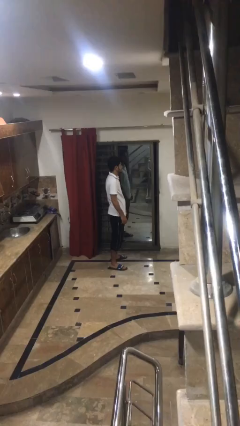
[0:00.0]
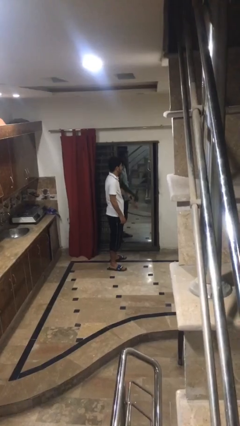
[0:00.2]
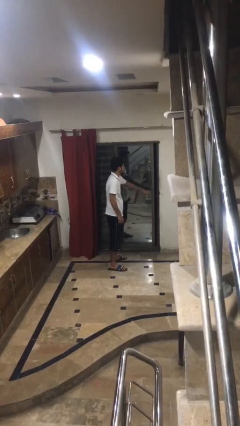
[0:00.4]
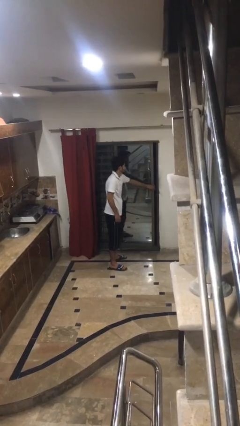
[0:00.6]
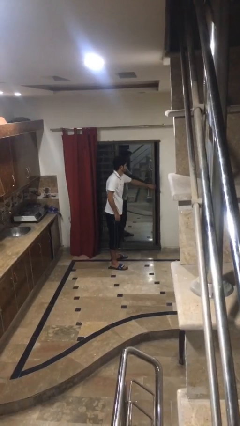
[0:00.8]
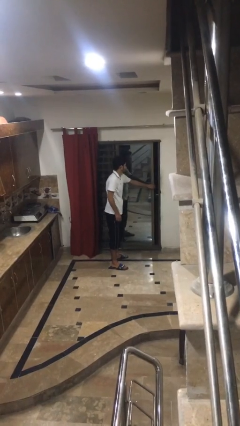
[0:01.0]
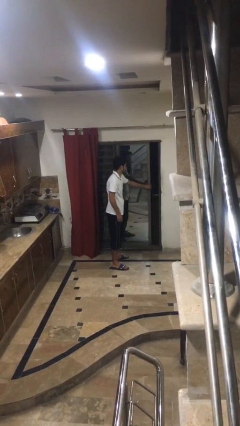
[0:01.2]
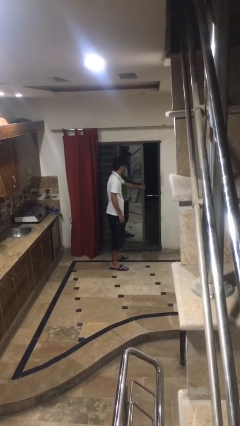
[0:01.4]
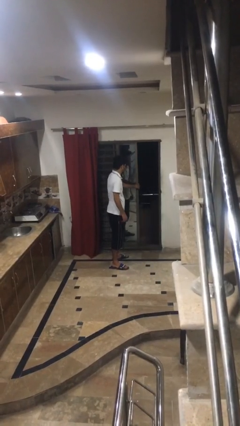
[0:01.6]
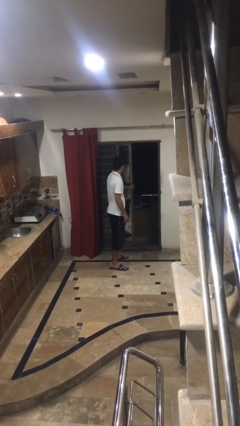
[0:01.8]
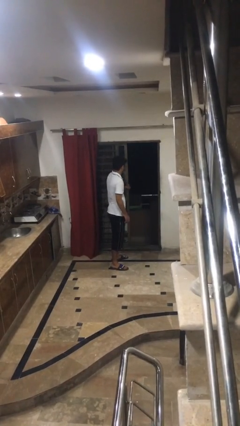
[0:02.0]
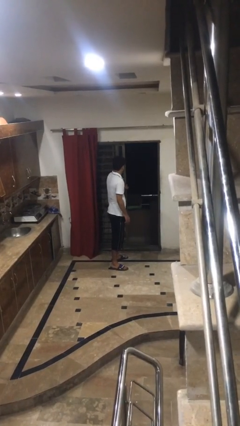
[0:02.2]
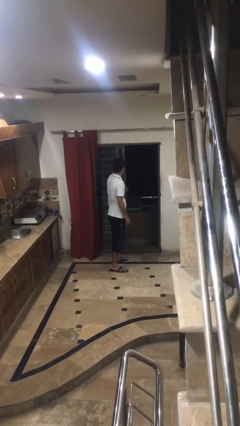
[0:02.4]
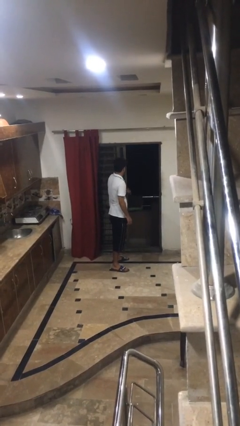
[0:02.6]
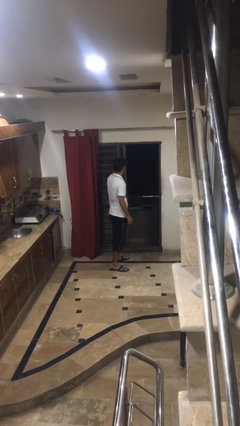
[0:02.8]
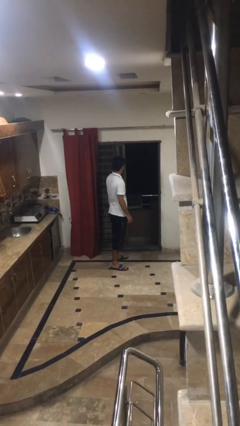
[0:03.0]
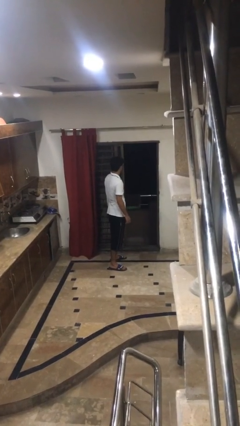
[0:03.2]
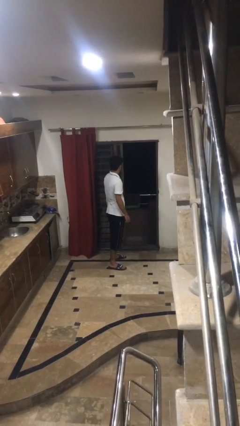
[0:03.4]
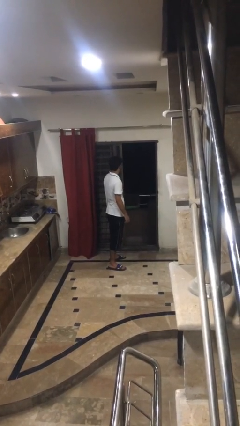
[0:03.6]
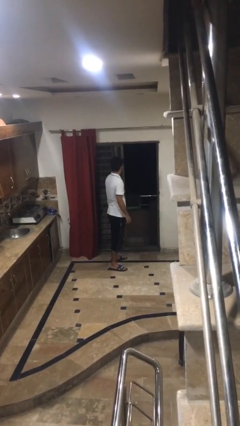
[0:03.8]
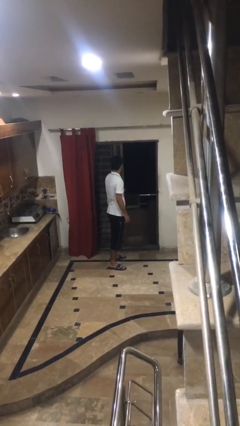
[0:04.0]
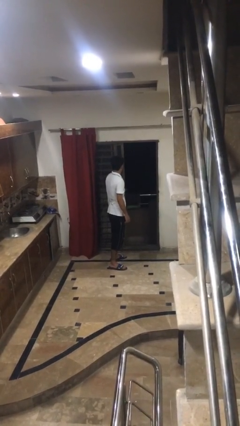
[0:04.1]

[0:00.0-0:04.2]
person opens sliding door

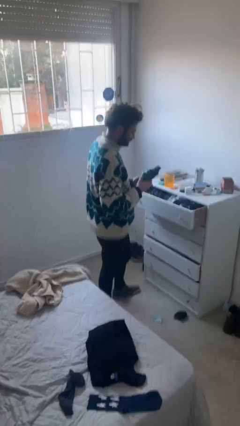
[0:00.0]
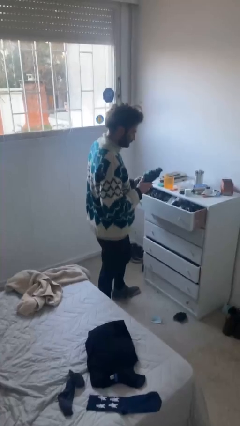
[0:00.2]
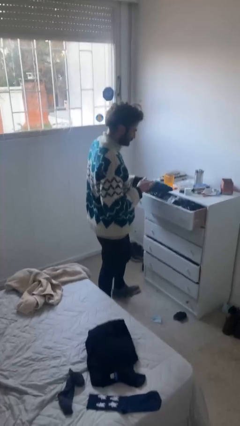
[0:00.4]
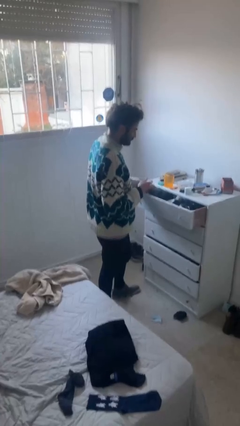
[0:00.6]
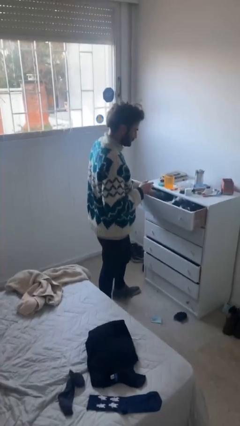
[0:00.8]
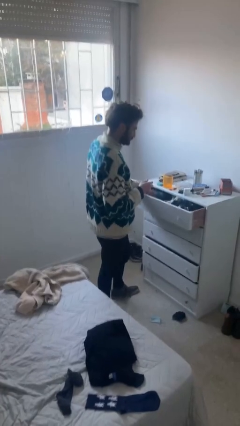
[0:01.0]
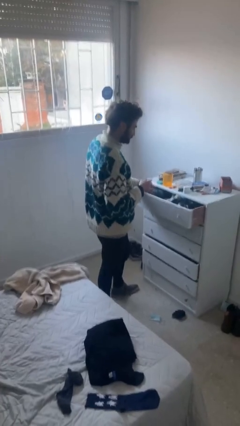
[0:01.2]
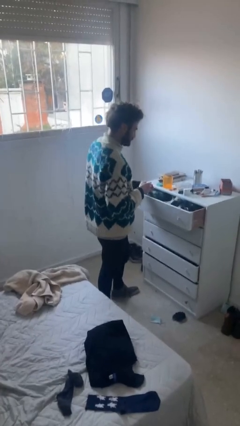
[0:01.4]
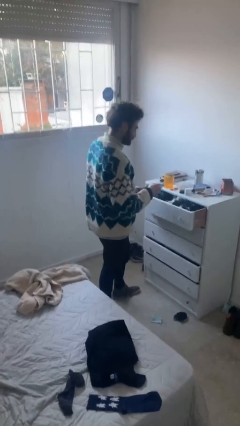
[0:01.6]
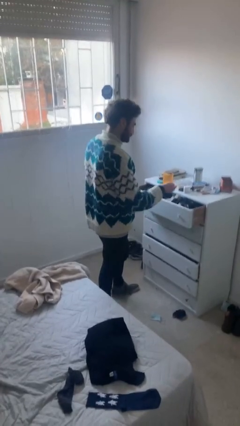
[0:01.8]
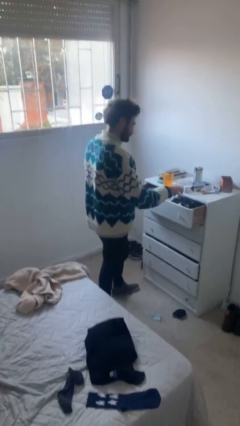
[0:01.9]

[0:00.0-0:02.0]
person puts clothes into dresser

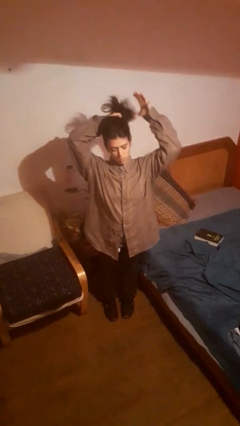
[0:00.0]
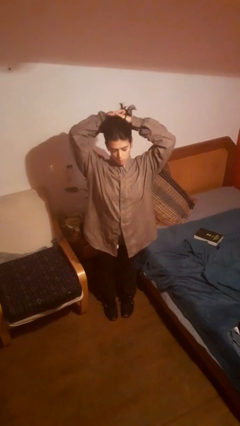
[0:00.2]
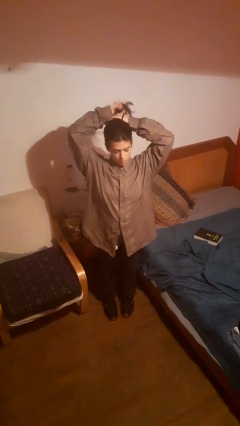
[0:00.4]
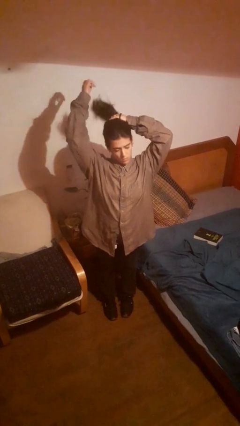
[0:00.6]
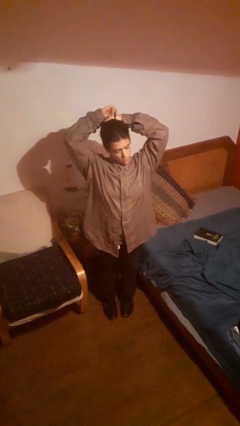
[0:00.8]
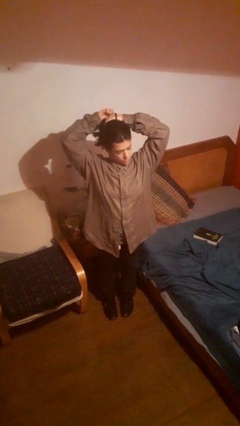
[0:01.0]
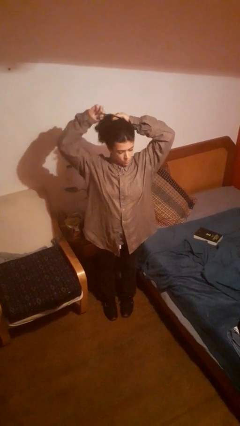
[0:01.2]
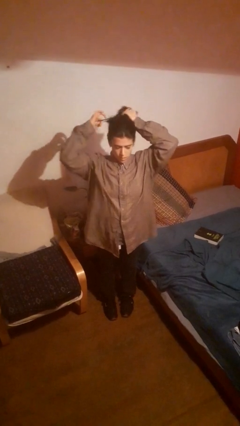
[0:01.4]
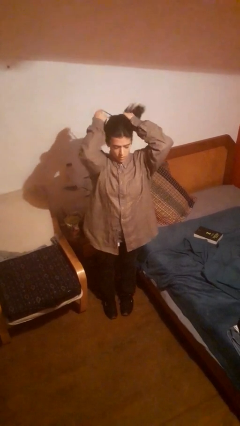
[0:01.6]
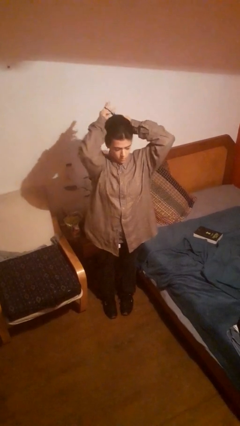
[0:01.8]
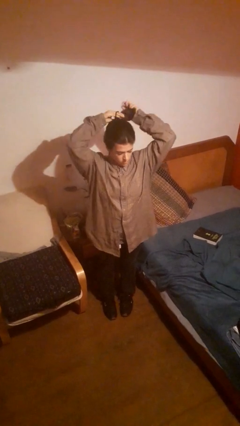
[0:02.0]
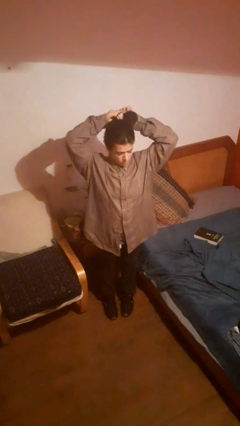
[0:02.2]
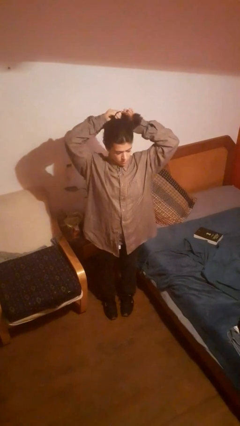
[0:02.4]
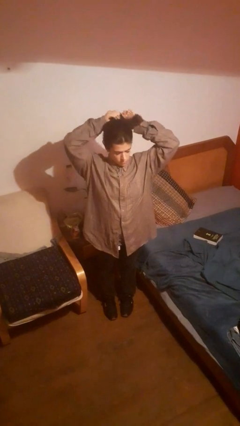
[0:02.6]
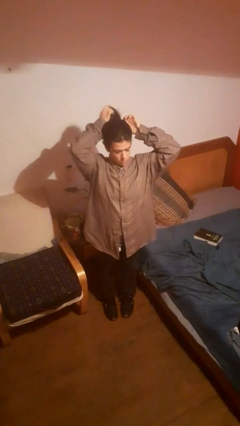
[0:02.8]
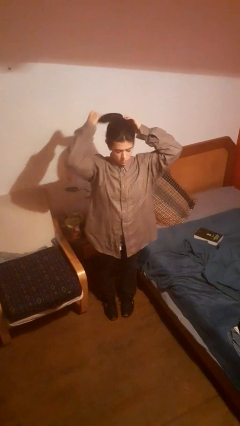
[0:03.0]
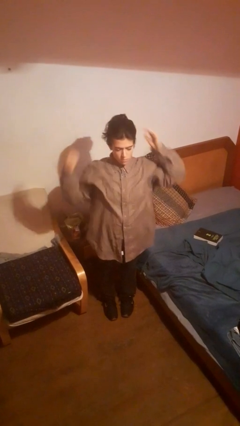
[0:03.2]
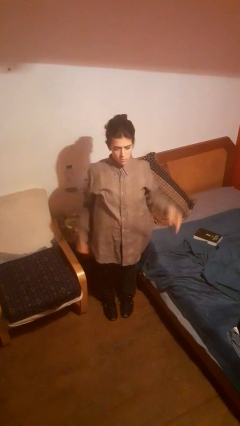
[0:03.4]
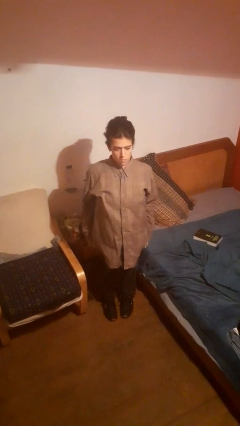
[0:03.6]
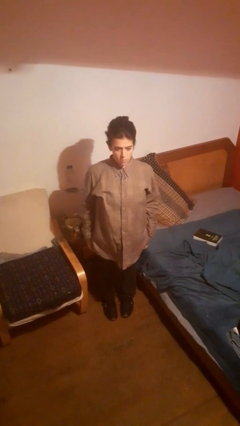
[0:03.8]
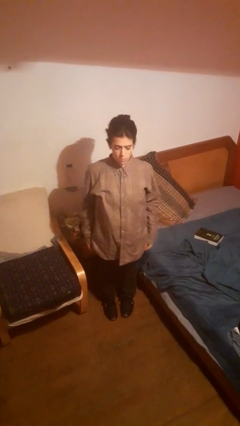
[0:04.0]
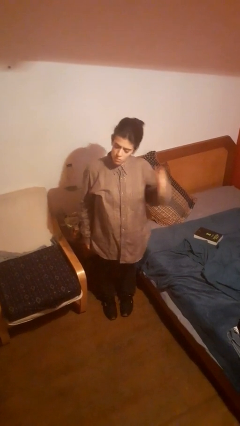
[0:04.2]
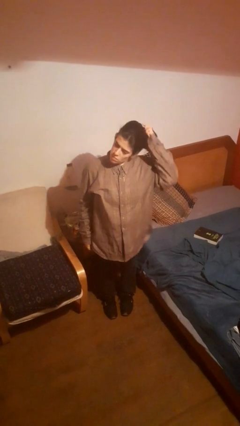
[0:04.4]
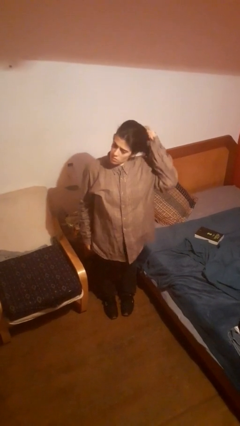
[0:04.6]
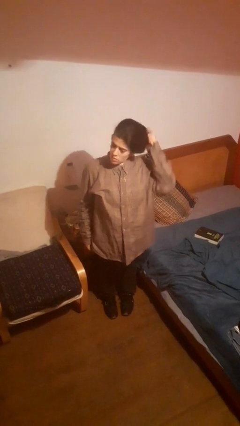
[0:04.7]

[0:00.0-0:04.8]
person puts hair in ponytail

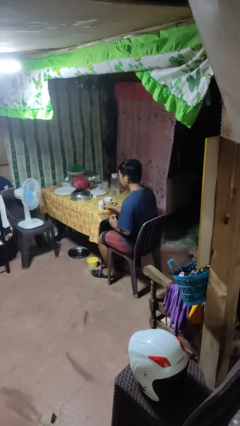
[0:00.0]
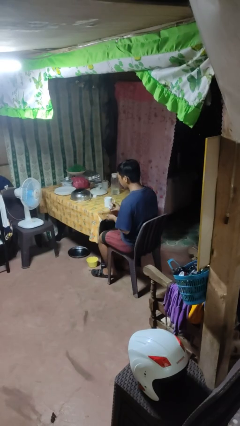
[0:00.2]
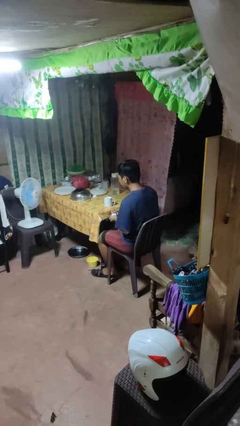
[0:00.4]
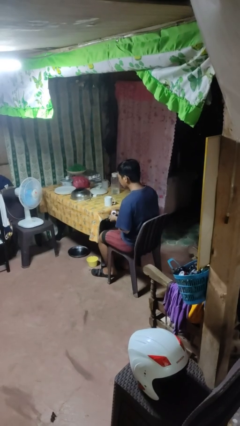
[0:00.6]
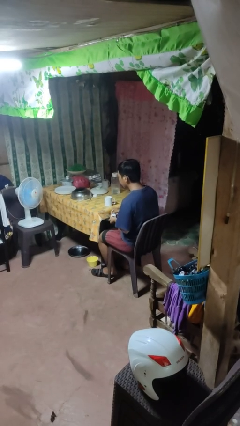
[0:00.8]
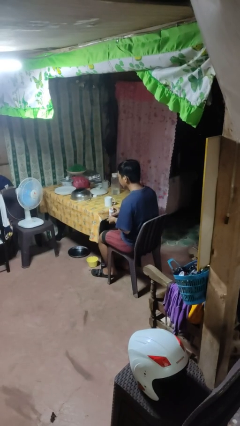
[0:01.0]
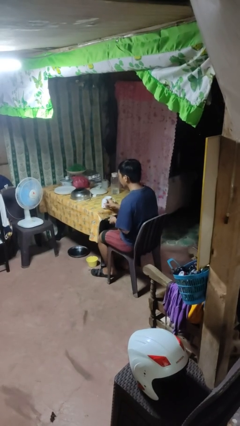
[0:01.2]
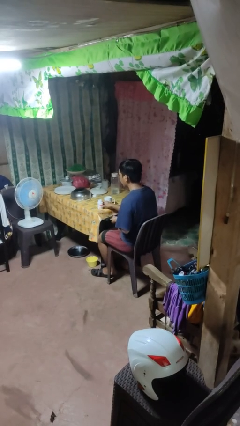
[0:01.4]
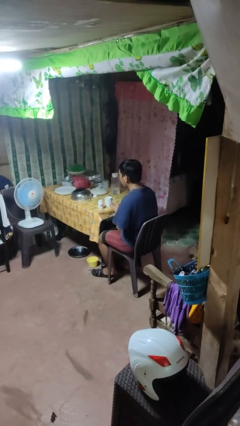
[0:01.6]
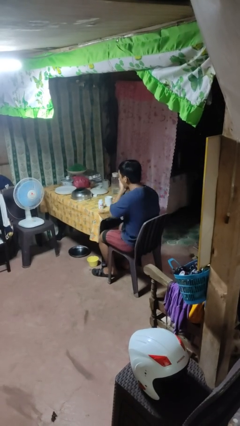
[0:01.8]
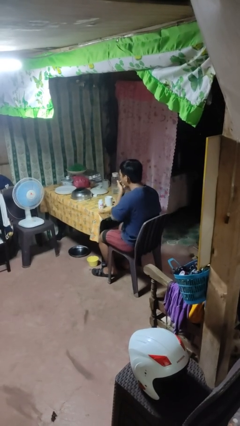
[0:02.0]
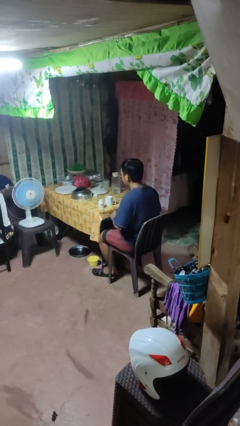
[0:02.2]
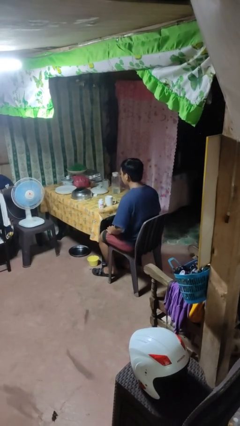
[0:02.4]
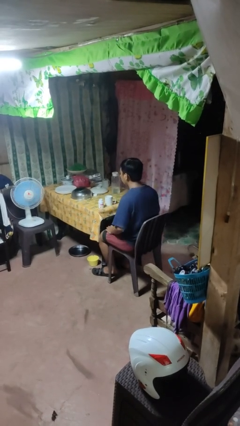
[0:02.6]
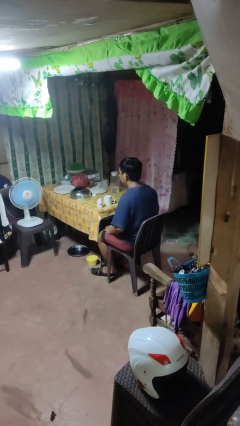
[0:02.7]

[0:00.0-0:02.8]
person takes medicine pills

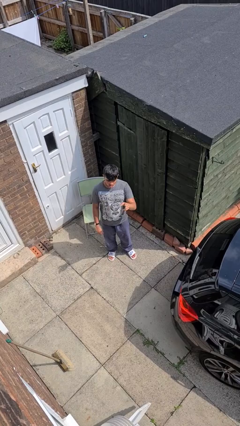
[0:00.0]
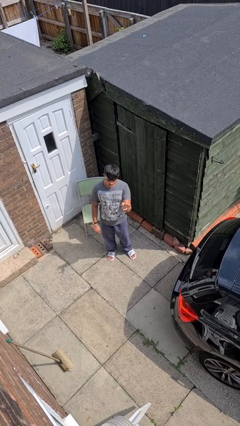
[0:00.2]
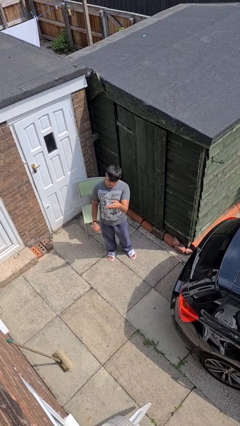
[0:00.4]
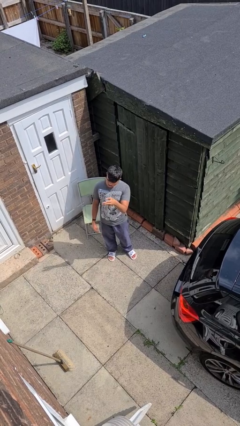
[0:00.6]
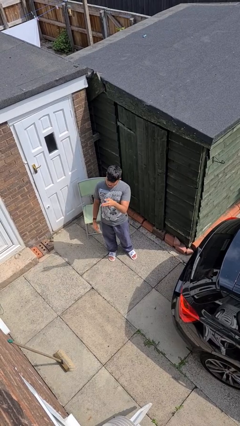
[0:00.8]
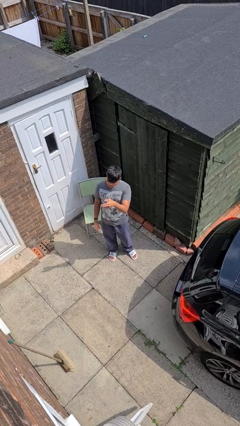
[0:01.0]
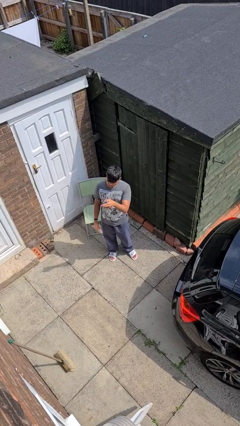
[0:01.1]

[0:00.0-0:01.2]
person gestures swipe right

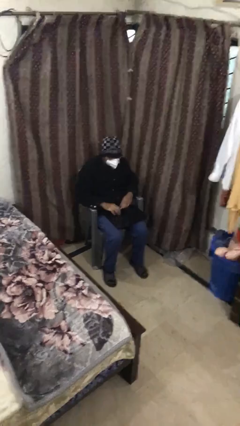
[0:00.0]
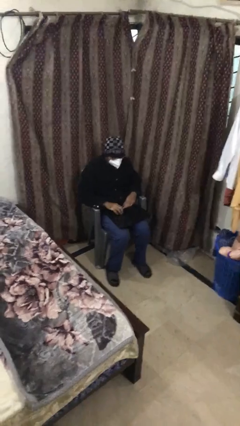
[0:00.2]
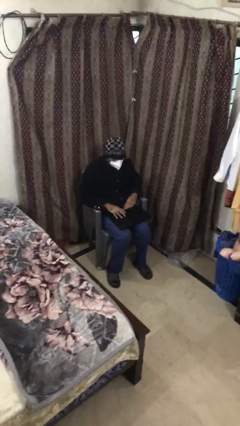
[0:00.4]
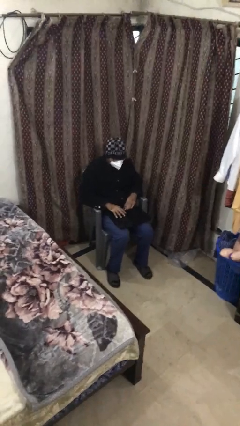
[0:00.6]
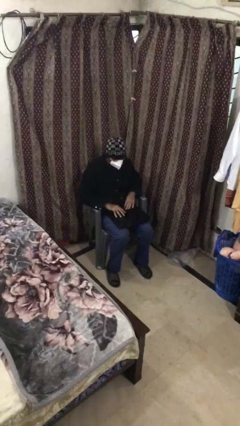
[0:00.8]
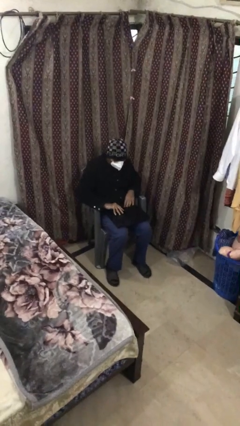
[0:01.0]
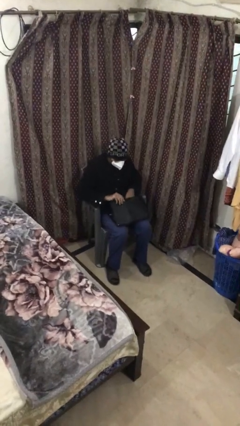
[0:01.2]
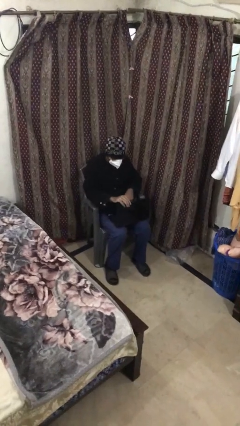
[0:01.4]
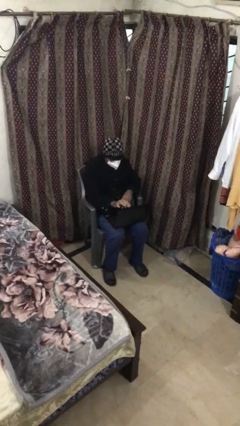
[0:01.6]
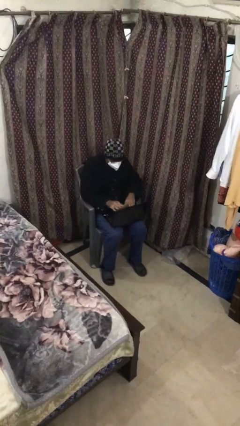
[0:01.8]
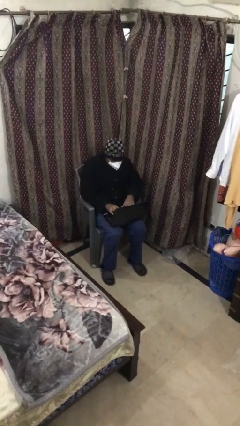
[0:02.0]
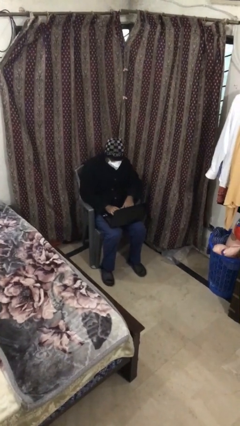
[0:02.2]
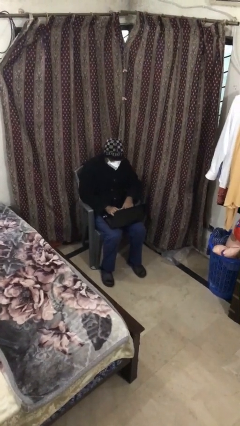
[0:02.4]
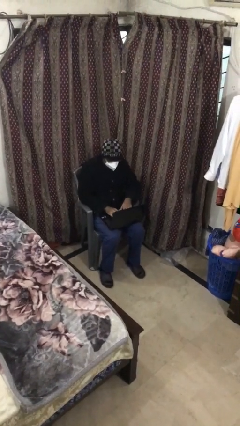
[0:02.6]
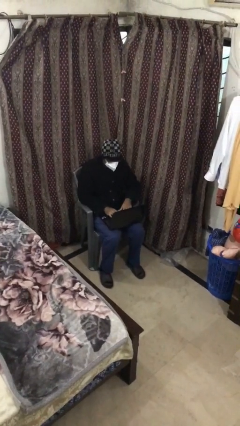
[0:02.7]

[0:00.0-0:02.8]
person interacts with laptop
